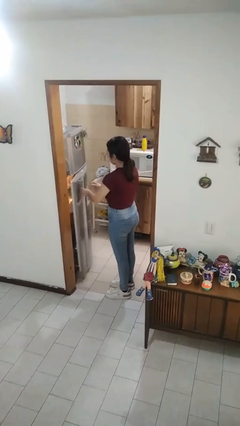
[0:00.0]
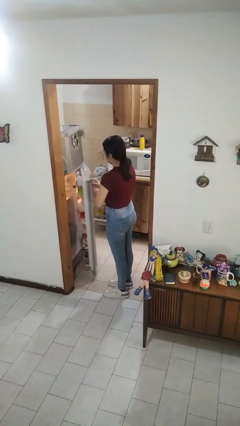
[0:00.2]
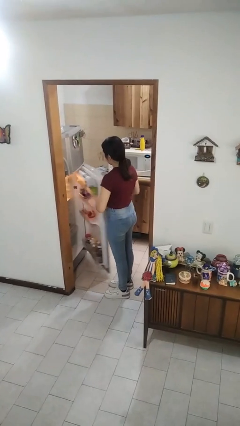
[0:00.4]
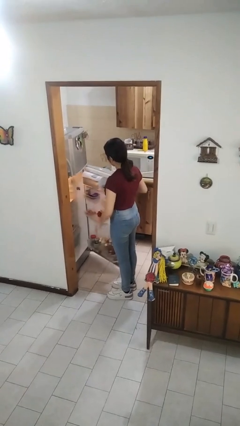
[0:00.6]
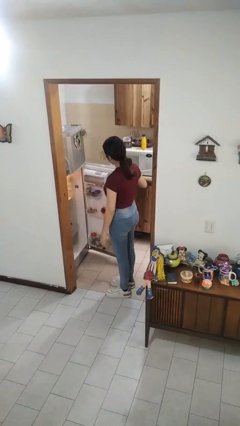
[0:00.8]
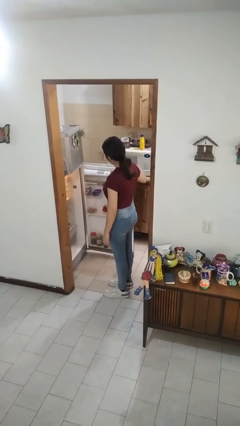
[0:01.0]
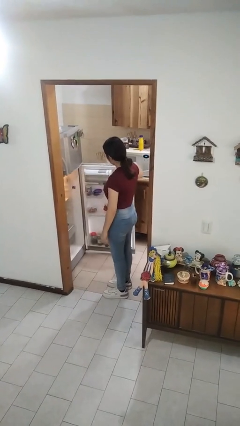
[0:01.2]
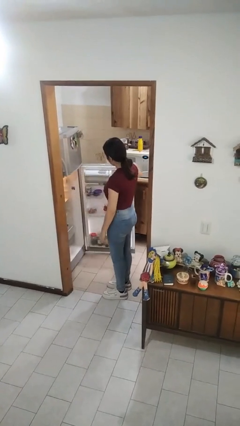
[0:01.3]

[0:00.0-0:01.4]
person opens refrigerator

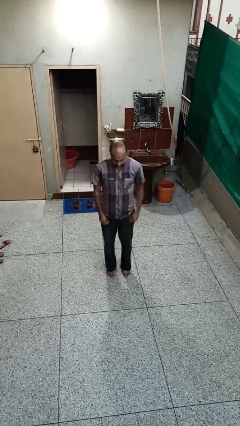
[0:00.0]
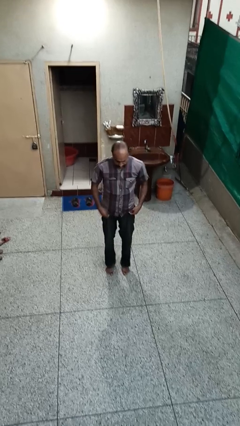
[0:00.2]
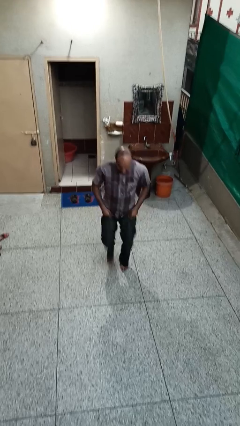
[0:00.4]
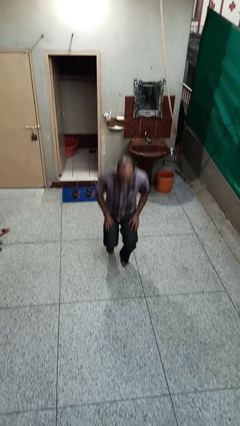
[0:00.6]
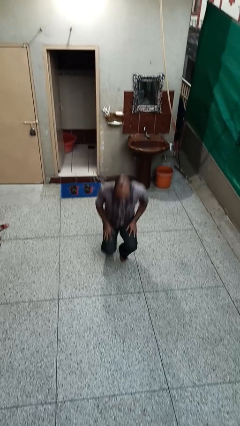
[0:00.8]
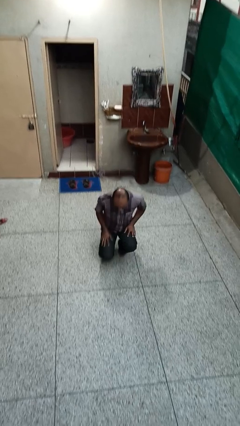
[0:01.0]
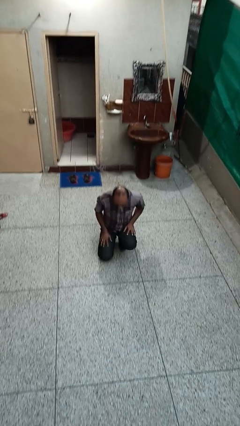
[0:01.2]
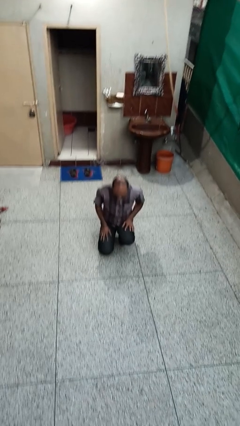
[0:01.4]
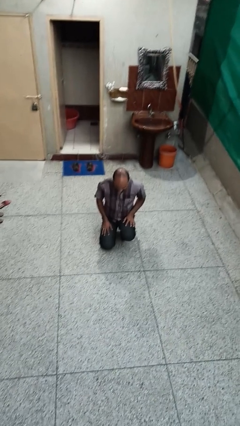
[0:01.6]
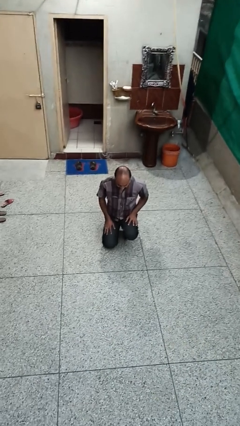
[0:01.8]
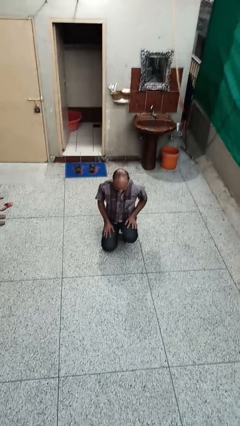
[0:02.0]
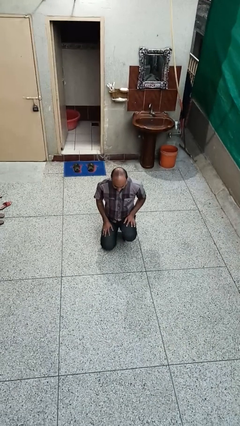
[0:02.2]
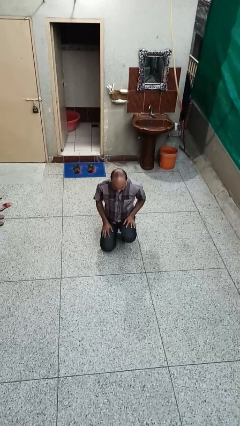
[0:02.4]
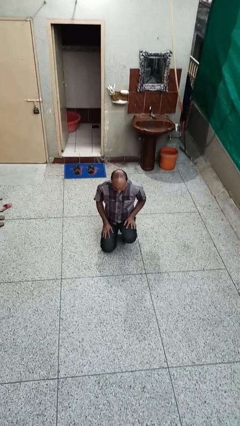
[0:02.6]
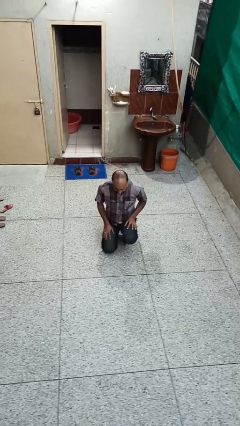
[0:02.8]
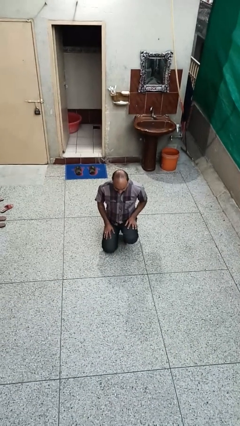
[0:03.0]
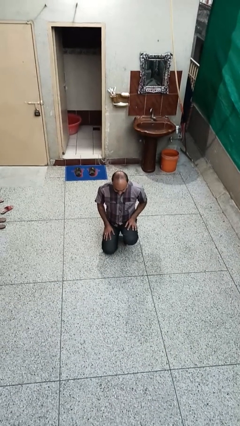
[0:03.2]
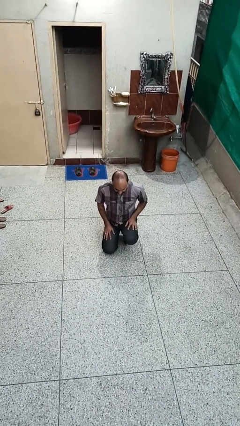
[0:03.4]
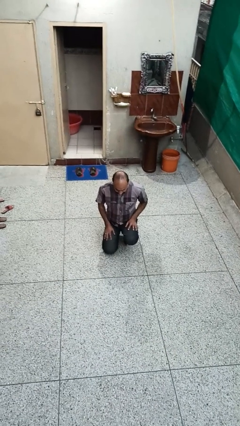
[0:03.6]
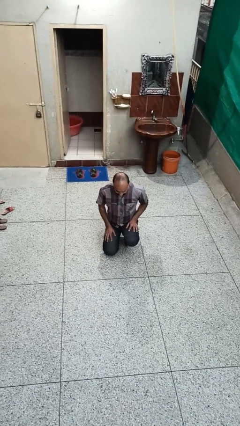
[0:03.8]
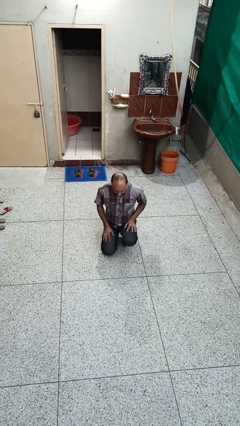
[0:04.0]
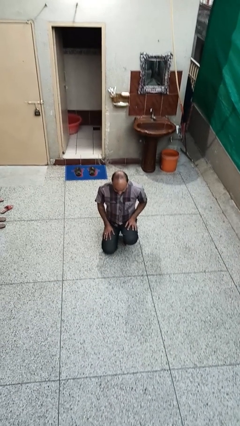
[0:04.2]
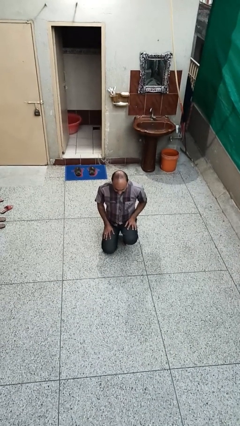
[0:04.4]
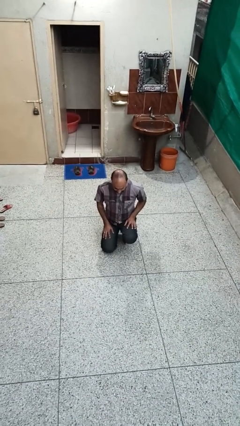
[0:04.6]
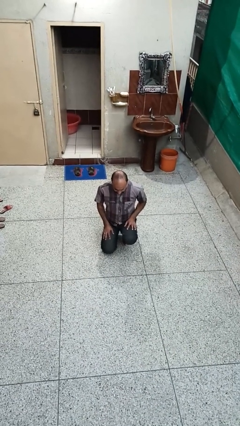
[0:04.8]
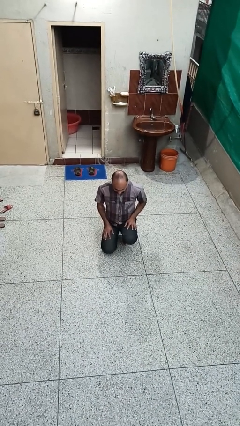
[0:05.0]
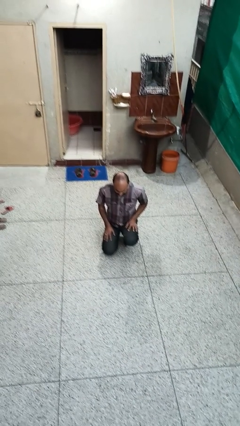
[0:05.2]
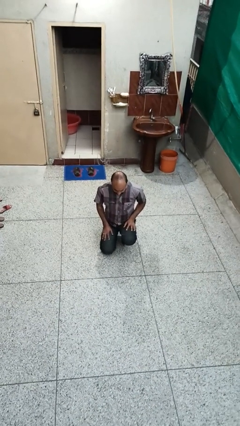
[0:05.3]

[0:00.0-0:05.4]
person kneels

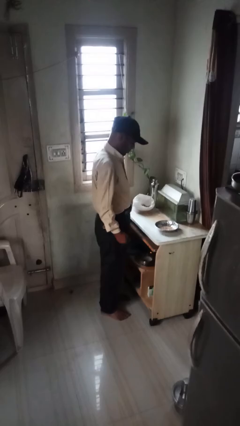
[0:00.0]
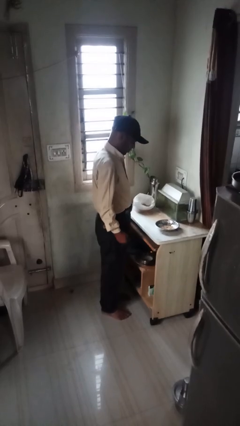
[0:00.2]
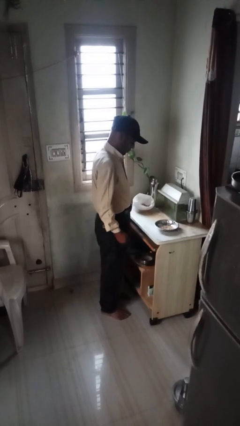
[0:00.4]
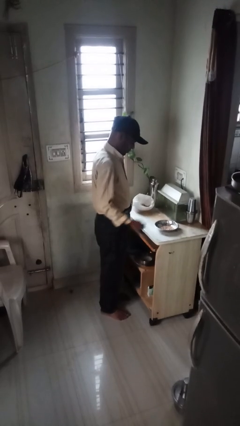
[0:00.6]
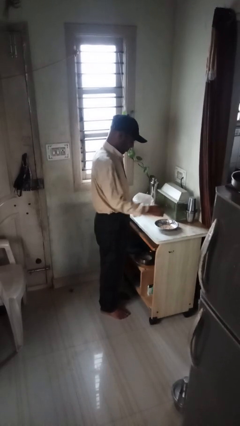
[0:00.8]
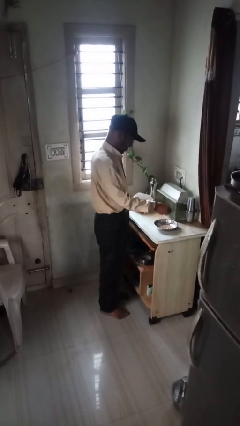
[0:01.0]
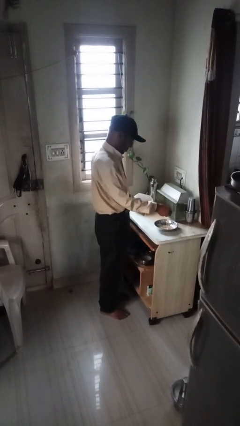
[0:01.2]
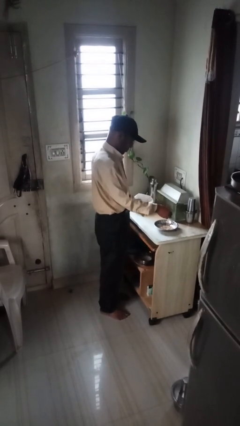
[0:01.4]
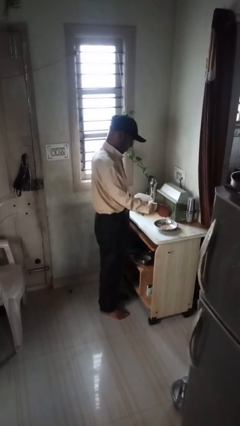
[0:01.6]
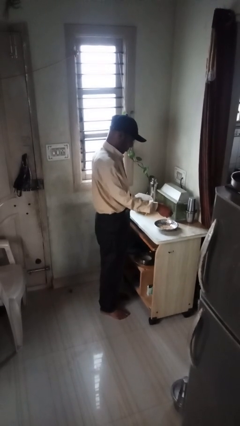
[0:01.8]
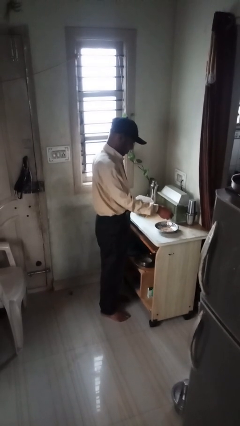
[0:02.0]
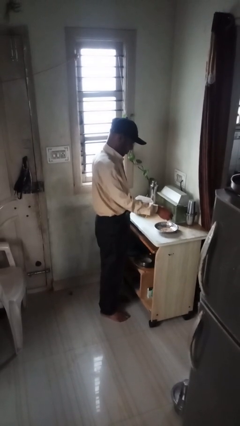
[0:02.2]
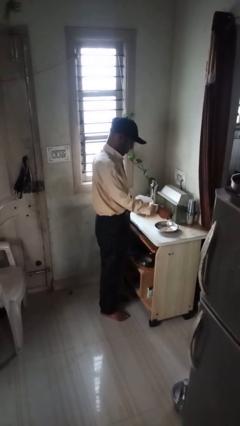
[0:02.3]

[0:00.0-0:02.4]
person pours into bowl

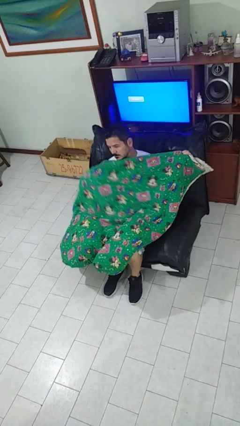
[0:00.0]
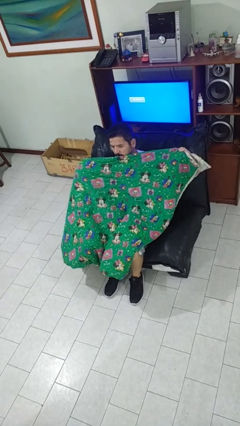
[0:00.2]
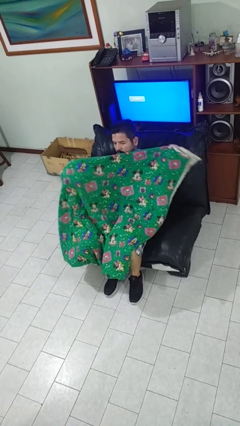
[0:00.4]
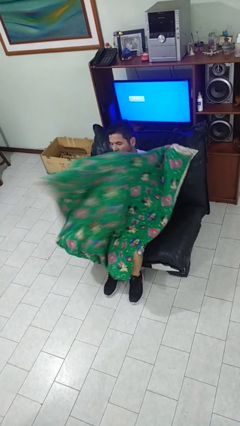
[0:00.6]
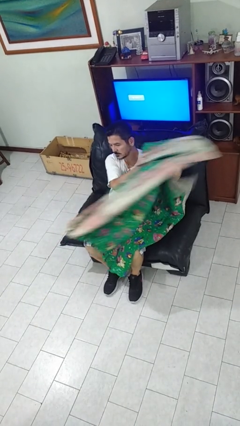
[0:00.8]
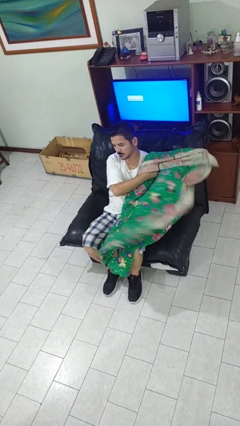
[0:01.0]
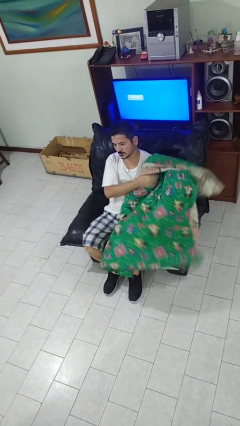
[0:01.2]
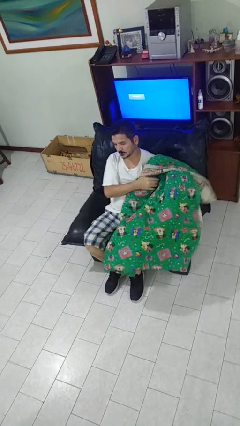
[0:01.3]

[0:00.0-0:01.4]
person uncovers with blanket

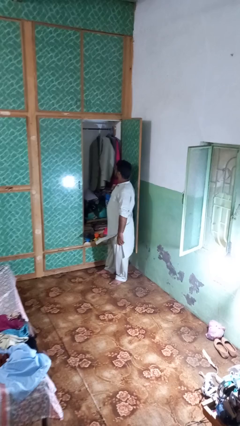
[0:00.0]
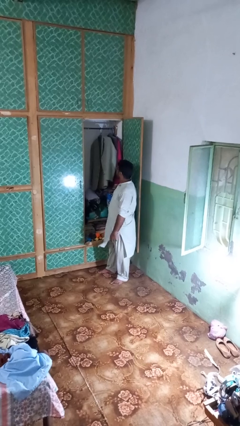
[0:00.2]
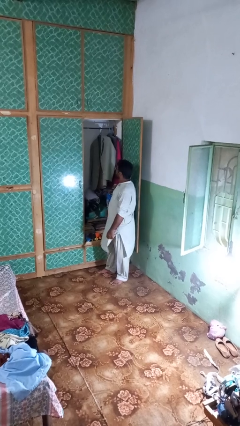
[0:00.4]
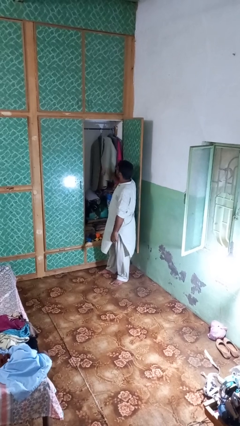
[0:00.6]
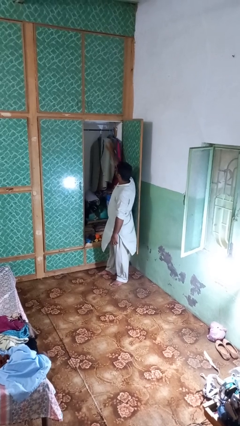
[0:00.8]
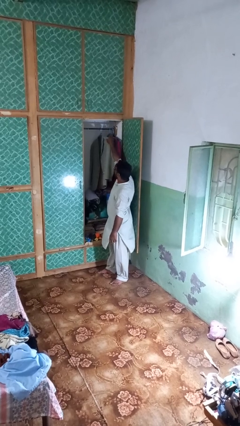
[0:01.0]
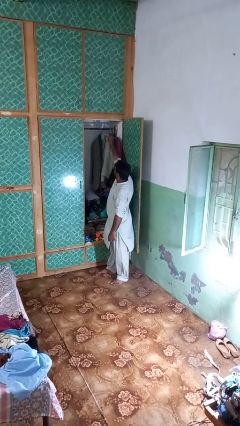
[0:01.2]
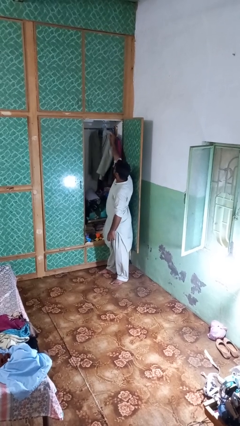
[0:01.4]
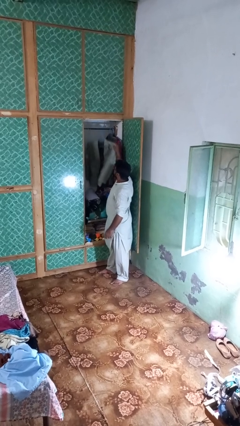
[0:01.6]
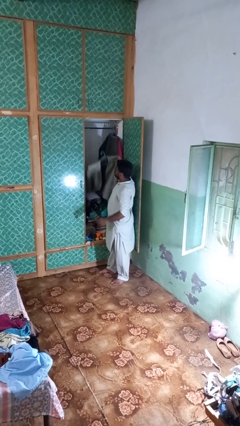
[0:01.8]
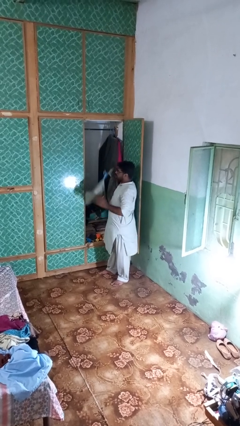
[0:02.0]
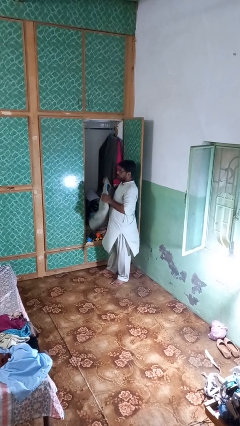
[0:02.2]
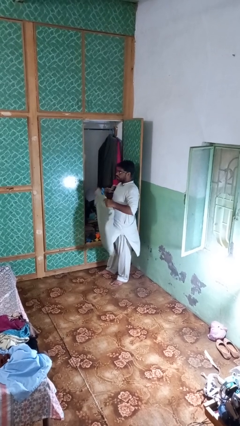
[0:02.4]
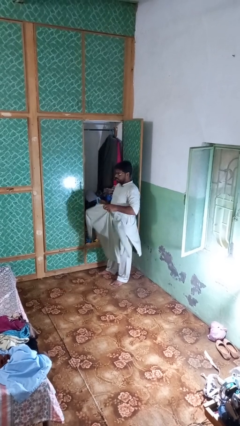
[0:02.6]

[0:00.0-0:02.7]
person takes clothes from closet

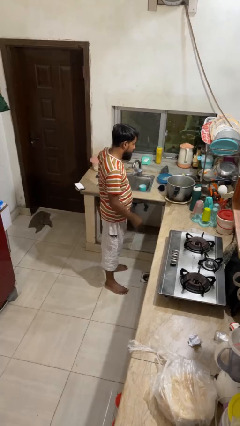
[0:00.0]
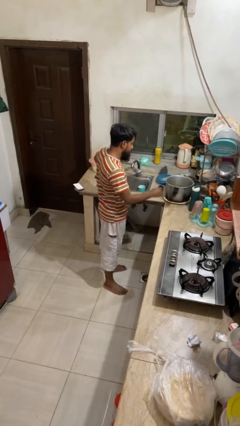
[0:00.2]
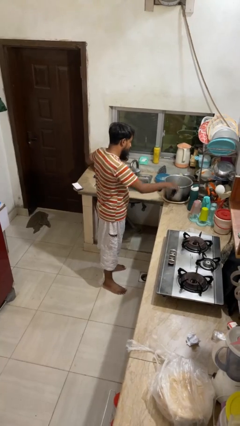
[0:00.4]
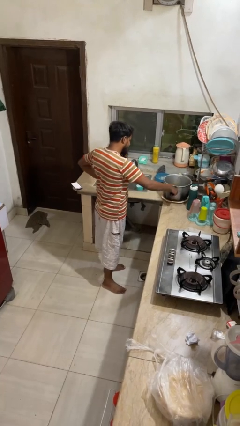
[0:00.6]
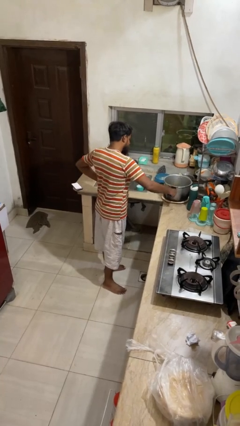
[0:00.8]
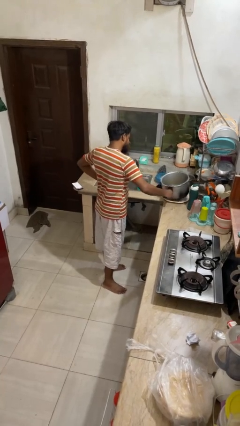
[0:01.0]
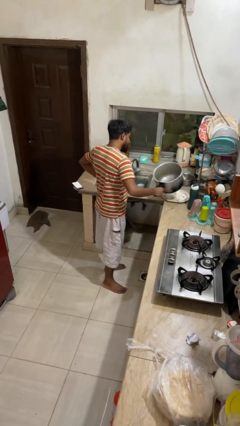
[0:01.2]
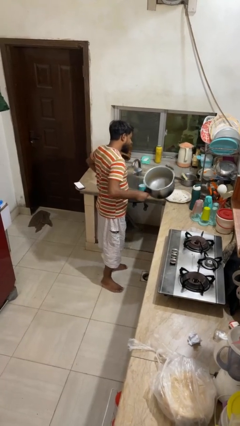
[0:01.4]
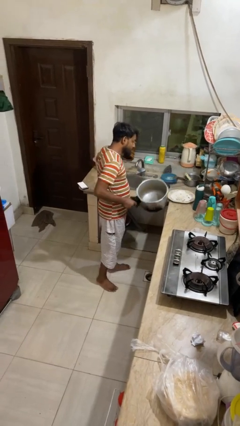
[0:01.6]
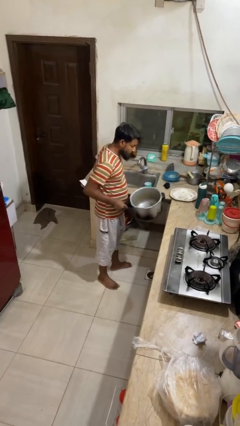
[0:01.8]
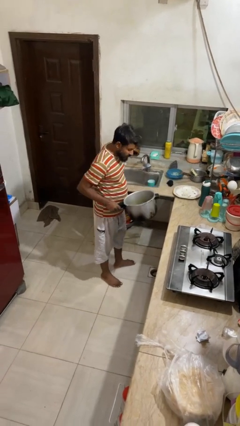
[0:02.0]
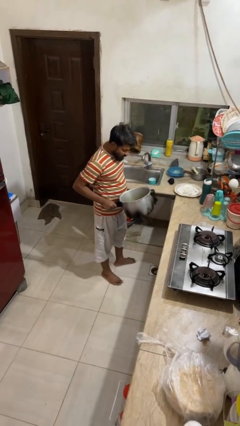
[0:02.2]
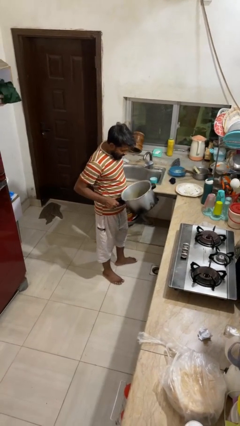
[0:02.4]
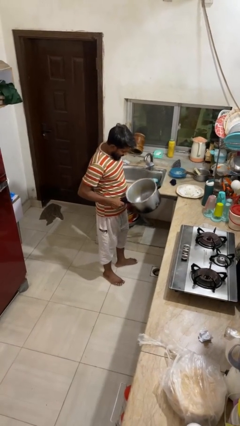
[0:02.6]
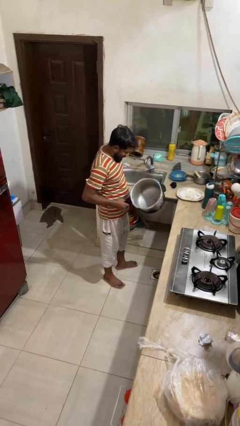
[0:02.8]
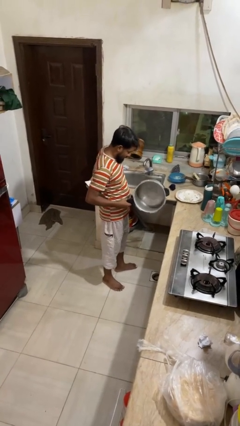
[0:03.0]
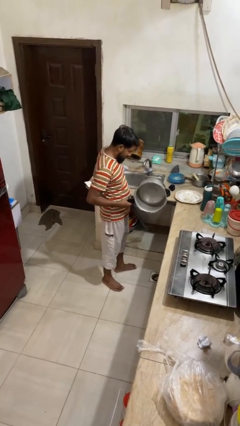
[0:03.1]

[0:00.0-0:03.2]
person picks up object from countertop

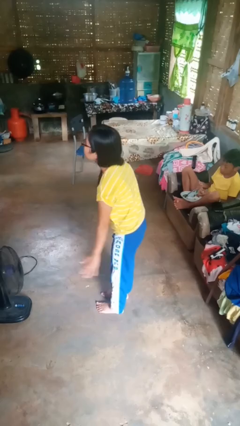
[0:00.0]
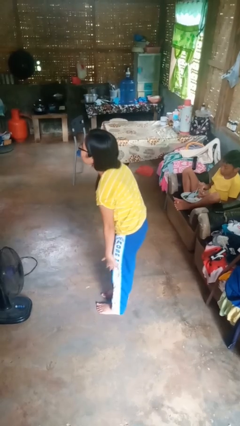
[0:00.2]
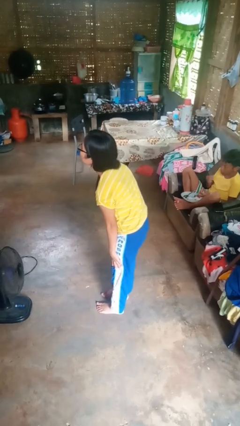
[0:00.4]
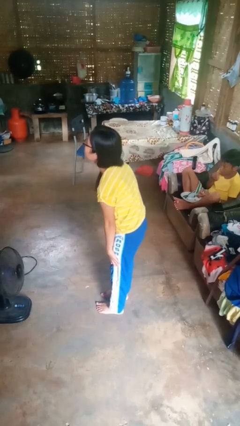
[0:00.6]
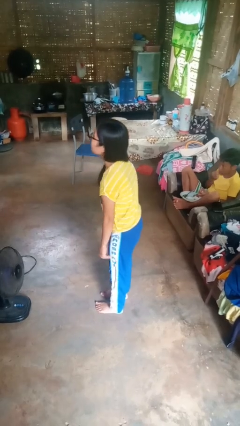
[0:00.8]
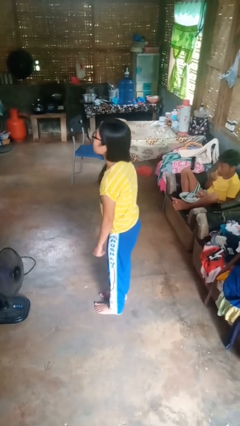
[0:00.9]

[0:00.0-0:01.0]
person slaps hands on thighs
